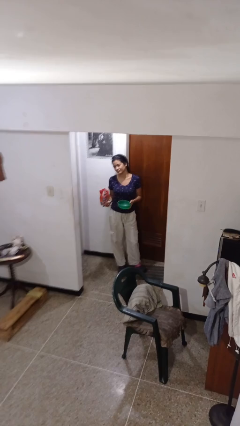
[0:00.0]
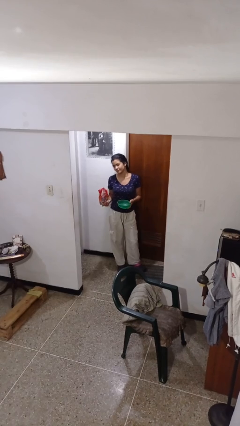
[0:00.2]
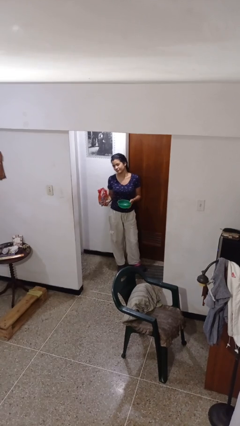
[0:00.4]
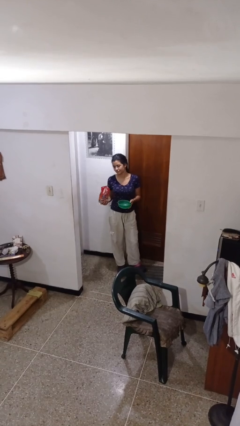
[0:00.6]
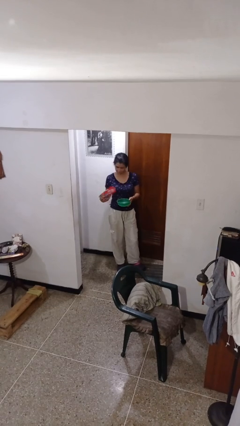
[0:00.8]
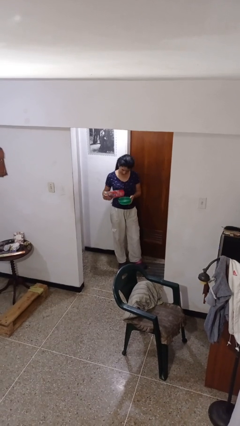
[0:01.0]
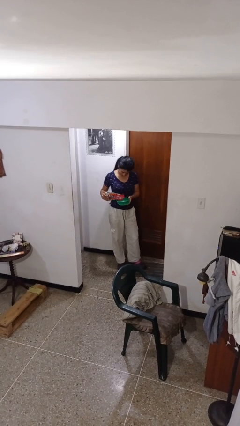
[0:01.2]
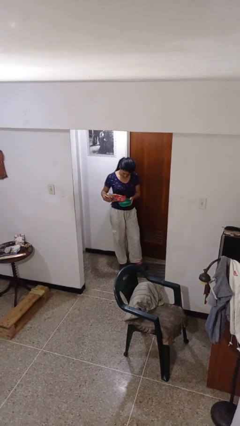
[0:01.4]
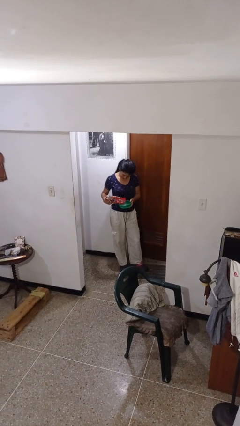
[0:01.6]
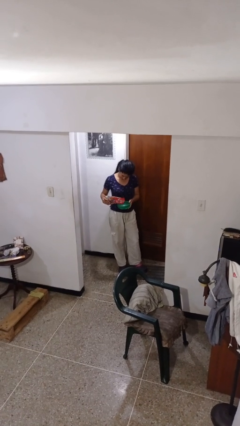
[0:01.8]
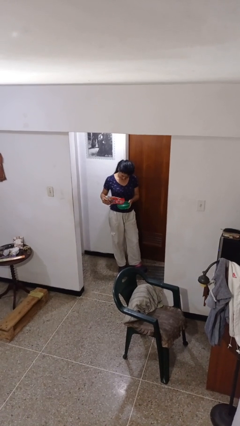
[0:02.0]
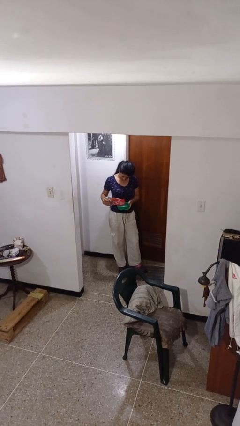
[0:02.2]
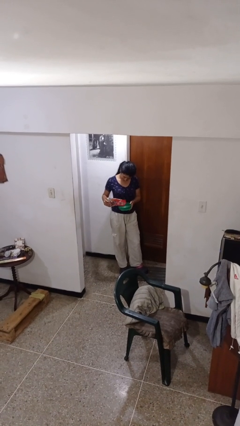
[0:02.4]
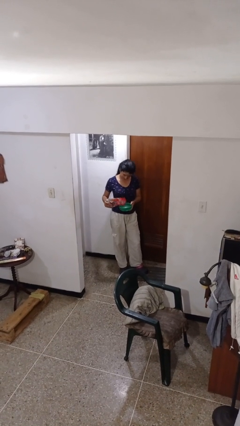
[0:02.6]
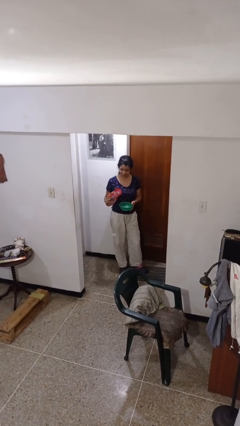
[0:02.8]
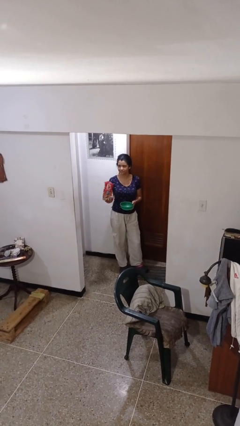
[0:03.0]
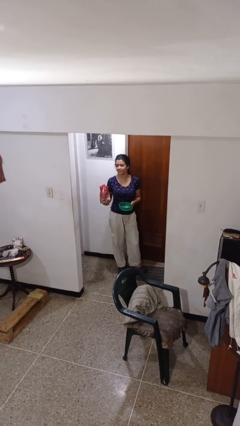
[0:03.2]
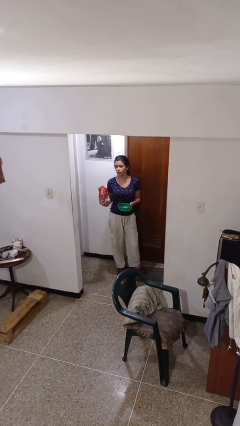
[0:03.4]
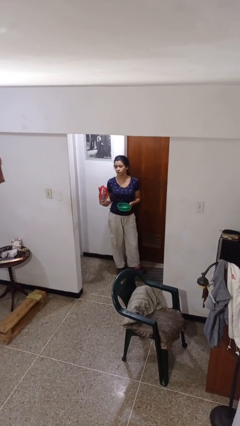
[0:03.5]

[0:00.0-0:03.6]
person pours into bowl

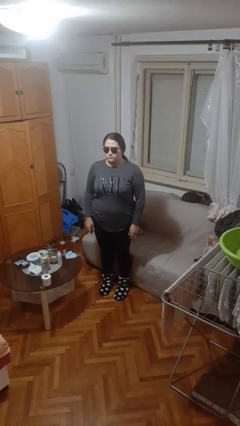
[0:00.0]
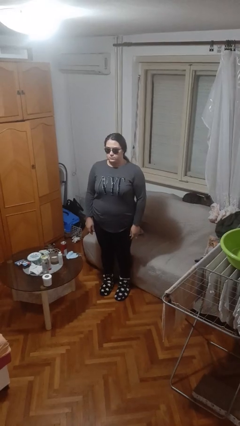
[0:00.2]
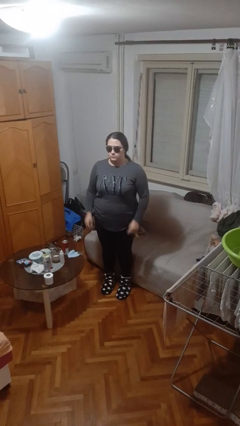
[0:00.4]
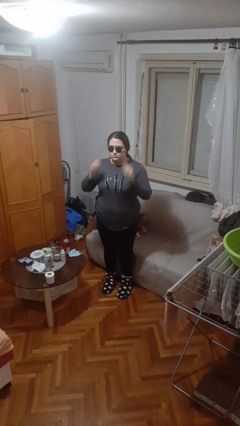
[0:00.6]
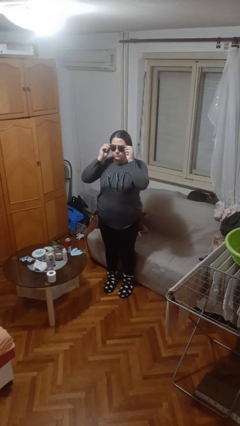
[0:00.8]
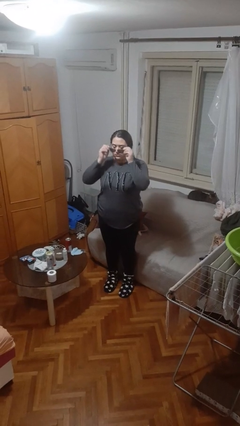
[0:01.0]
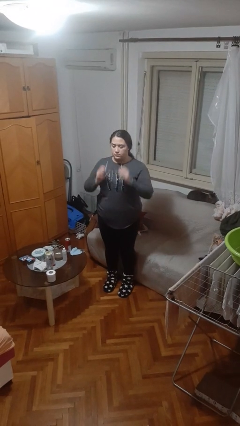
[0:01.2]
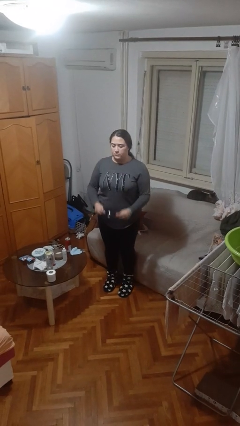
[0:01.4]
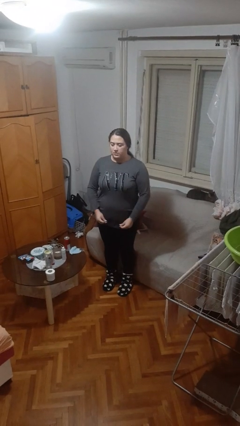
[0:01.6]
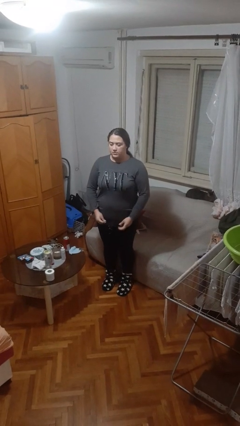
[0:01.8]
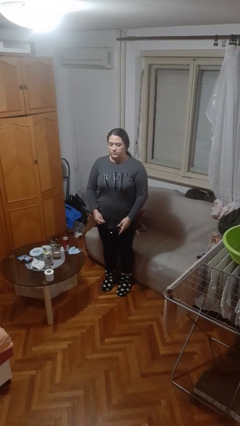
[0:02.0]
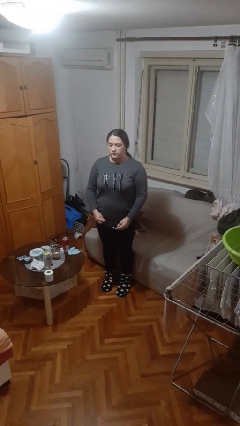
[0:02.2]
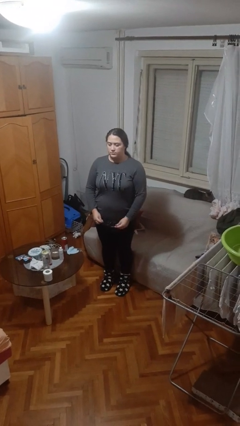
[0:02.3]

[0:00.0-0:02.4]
person takes off sunglasses

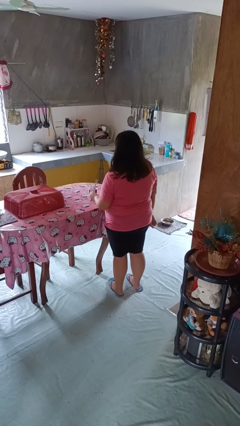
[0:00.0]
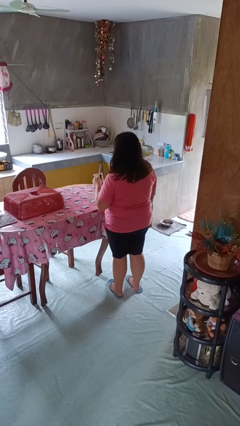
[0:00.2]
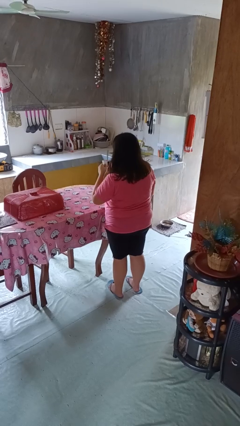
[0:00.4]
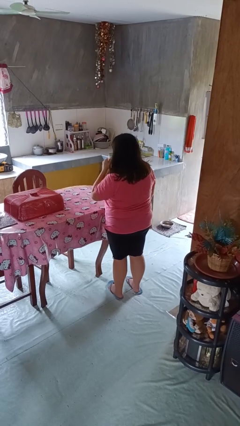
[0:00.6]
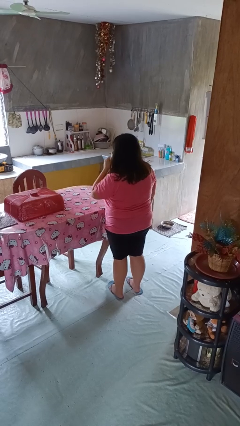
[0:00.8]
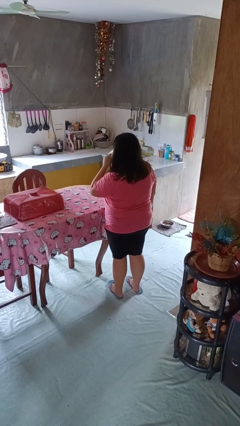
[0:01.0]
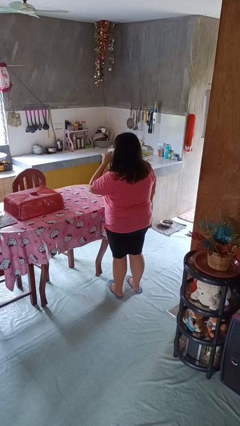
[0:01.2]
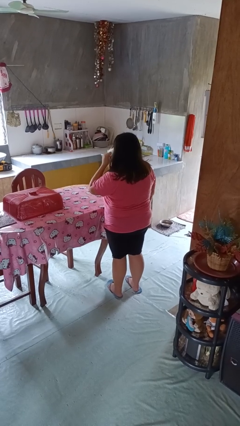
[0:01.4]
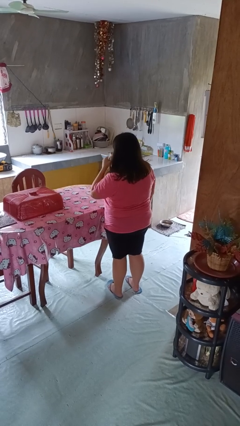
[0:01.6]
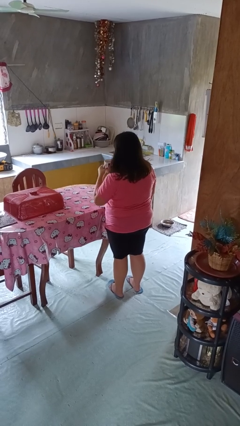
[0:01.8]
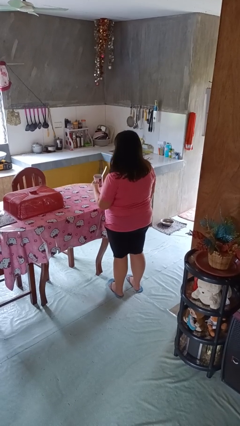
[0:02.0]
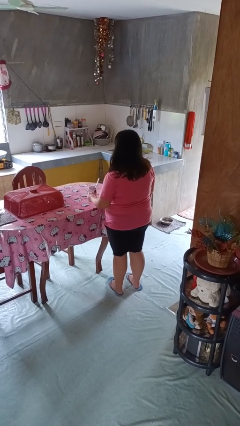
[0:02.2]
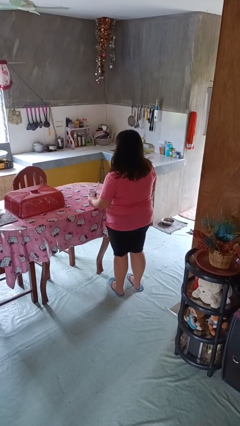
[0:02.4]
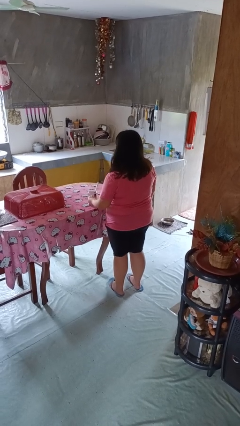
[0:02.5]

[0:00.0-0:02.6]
person drinks from mug

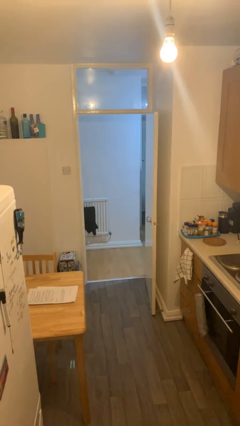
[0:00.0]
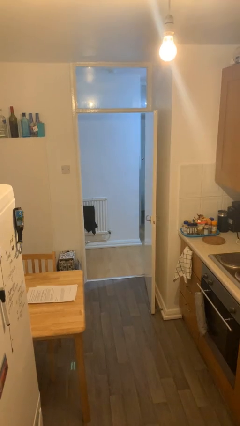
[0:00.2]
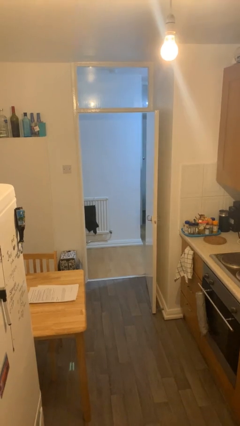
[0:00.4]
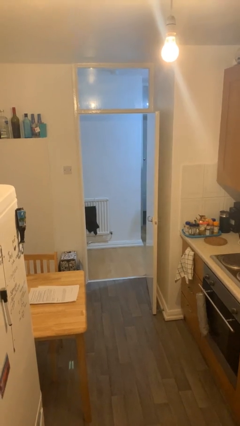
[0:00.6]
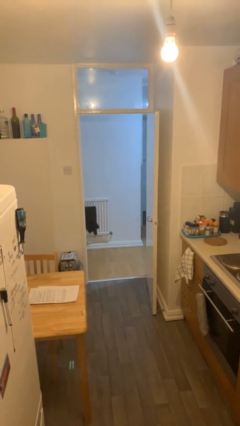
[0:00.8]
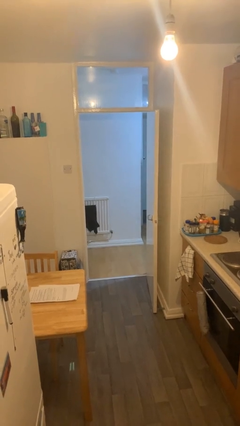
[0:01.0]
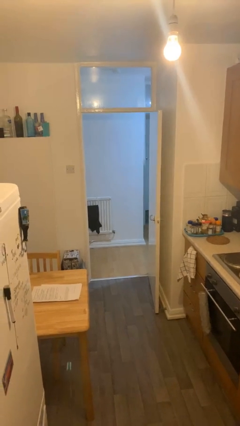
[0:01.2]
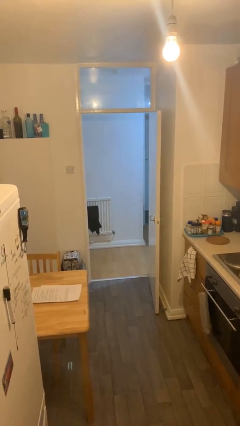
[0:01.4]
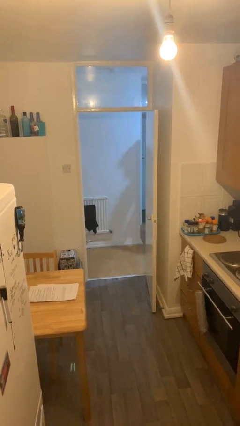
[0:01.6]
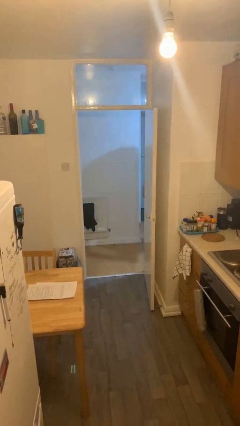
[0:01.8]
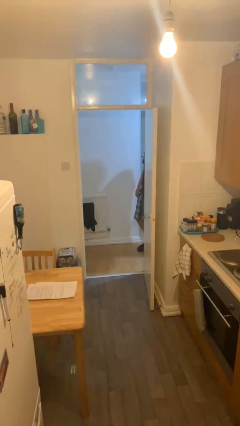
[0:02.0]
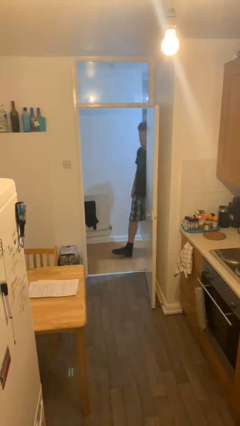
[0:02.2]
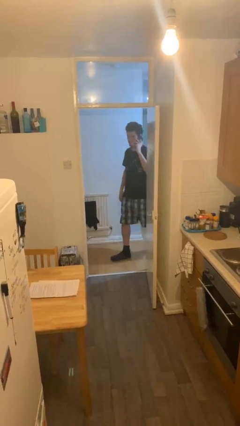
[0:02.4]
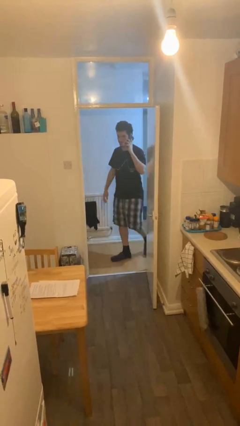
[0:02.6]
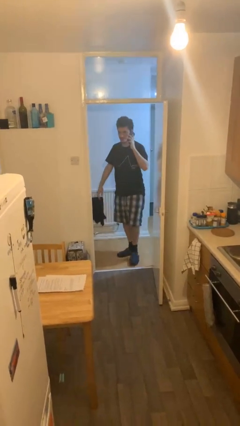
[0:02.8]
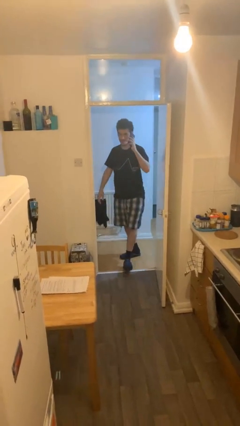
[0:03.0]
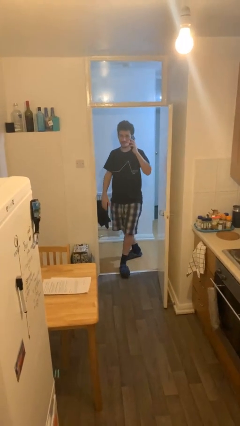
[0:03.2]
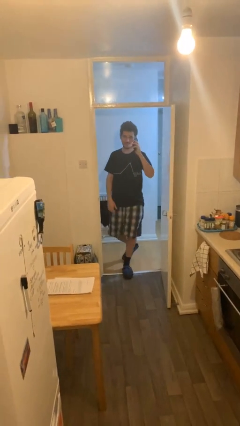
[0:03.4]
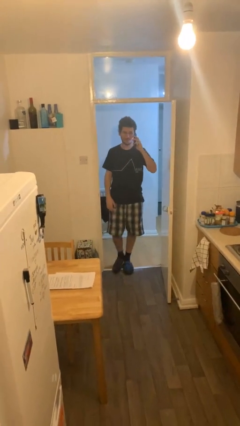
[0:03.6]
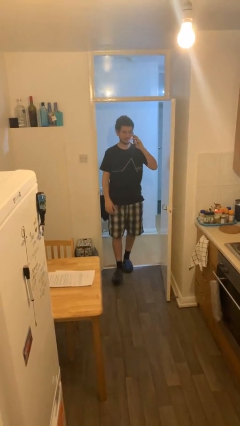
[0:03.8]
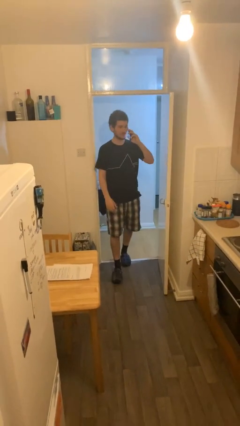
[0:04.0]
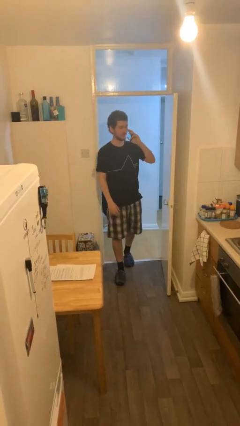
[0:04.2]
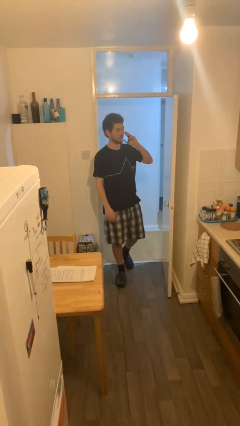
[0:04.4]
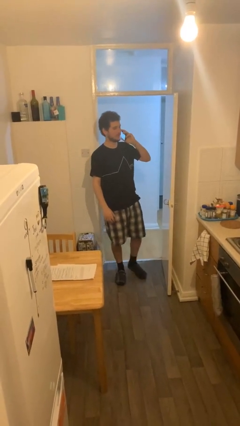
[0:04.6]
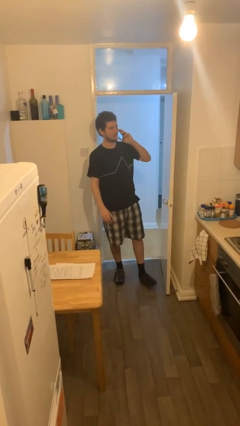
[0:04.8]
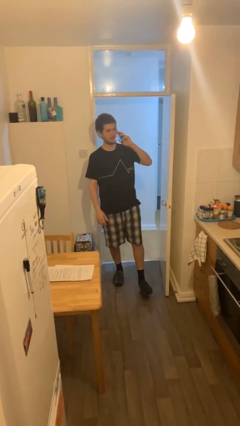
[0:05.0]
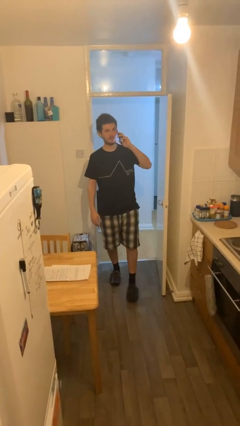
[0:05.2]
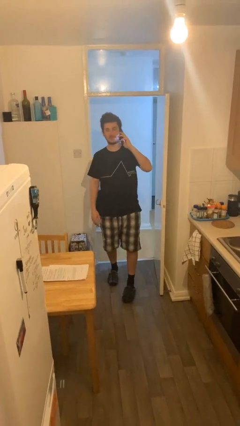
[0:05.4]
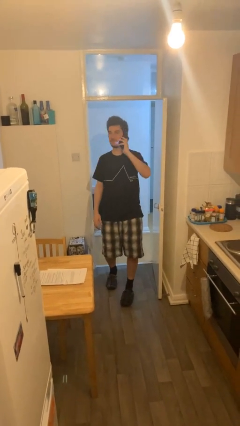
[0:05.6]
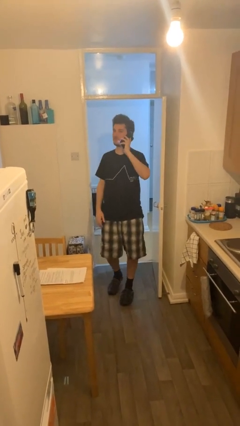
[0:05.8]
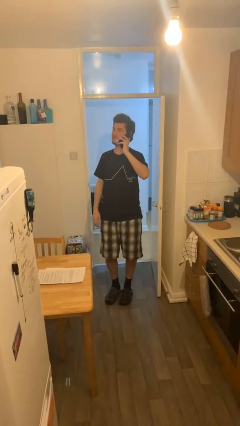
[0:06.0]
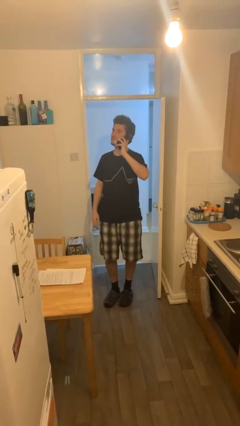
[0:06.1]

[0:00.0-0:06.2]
person enters scene through structure

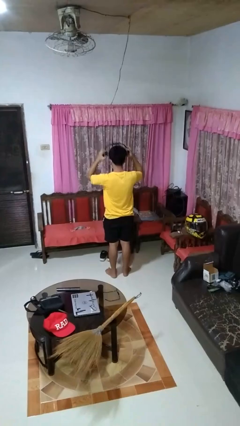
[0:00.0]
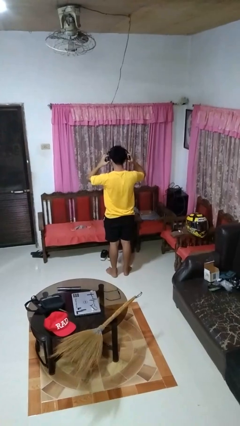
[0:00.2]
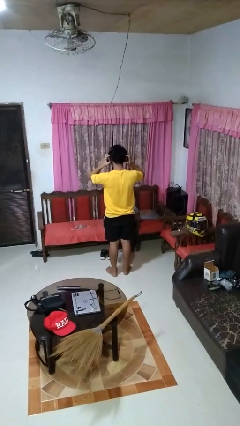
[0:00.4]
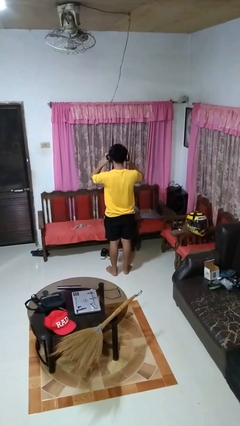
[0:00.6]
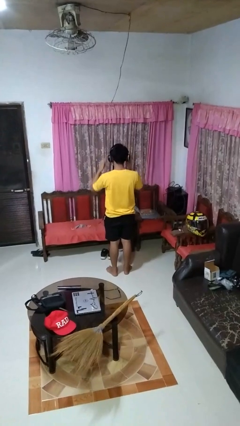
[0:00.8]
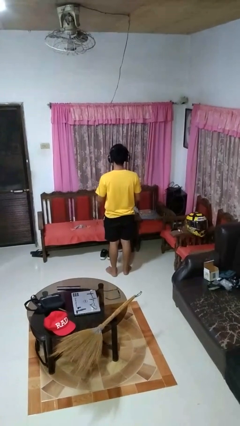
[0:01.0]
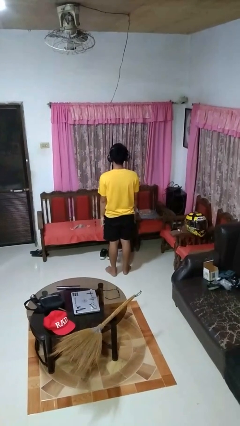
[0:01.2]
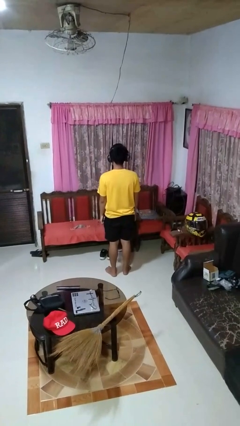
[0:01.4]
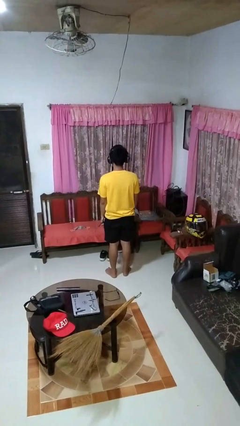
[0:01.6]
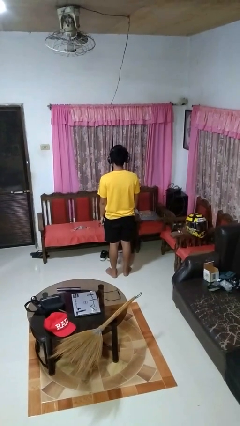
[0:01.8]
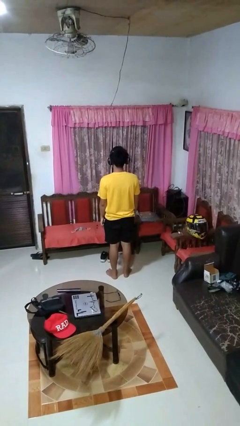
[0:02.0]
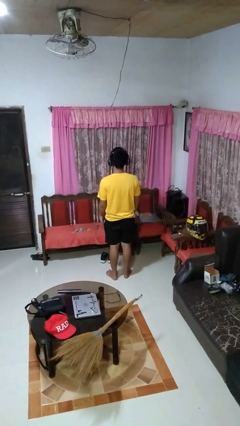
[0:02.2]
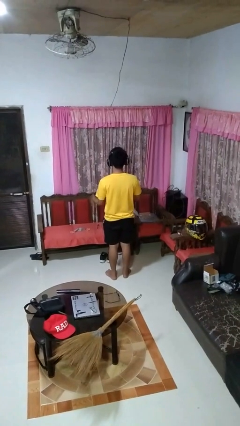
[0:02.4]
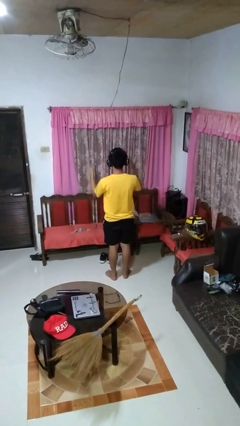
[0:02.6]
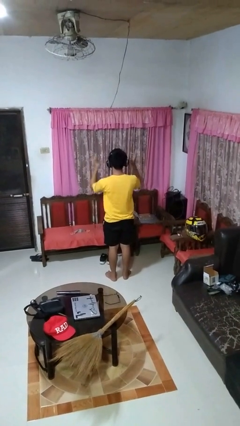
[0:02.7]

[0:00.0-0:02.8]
person puts on headphones
